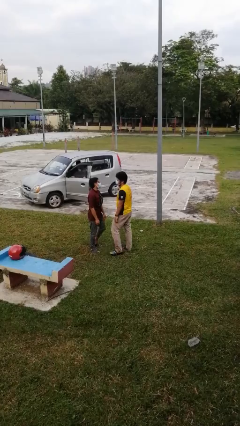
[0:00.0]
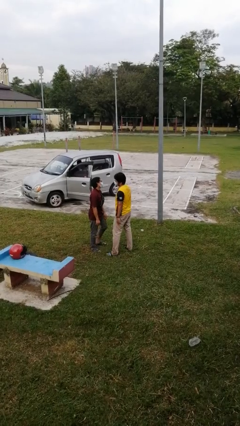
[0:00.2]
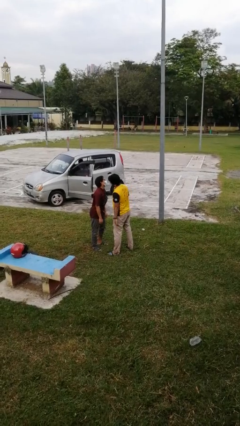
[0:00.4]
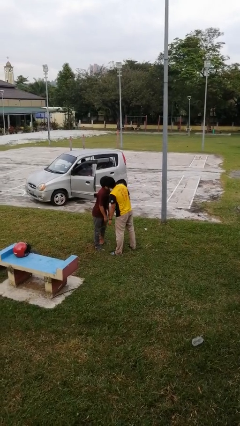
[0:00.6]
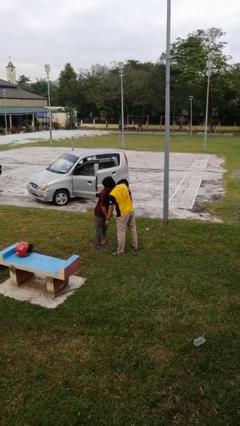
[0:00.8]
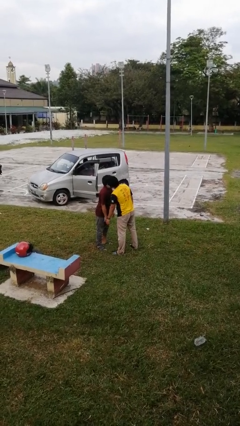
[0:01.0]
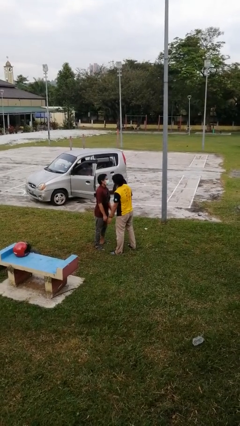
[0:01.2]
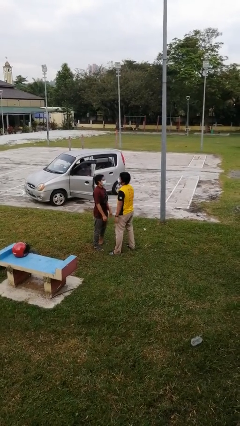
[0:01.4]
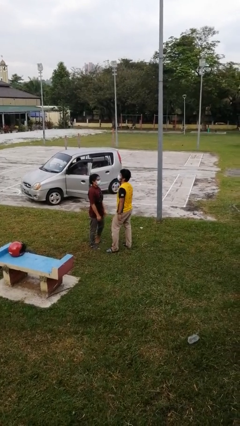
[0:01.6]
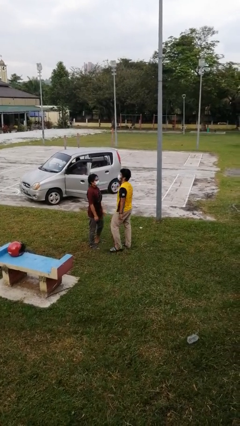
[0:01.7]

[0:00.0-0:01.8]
person kisses cheek of person

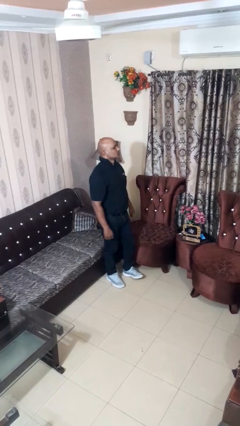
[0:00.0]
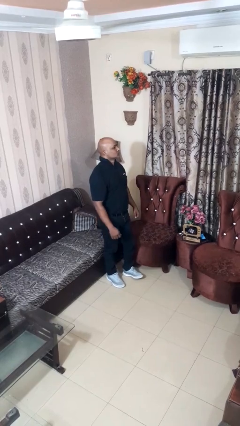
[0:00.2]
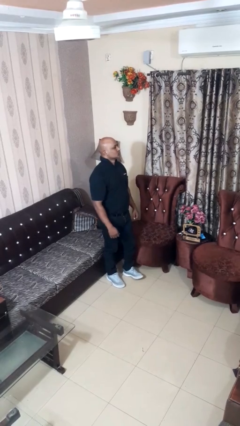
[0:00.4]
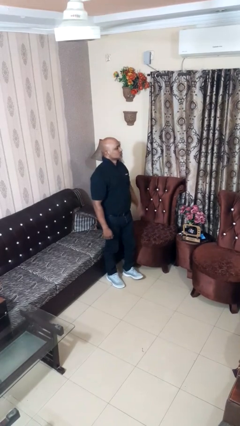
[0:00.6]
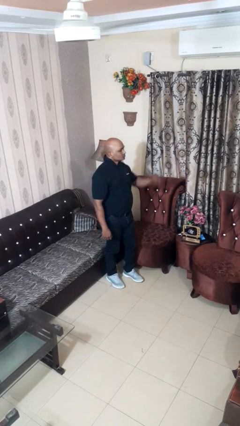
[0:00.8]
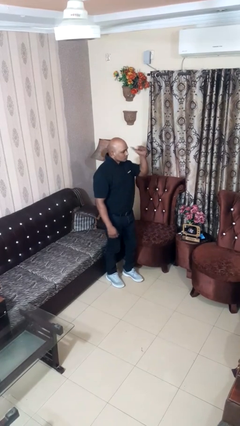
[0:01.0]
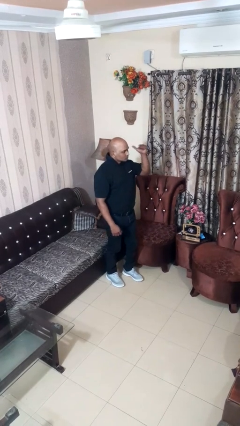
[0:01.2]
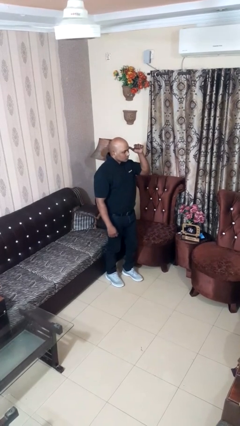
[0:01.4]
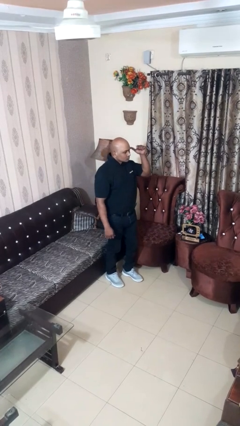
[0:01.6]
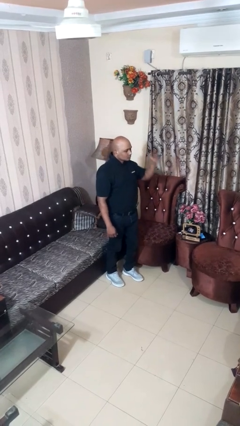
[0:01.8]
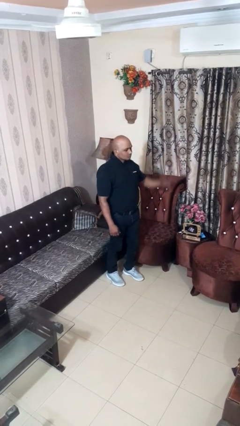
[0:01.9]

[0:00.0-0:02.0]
person gestures behind me

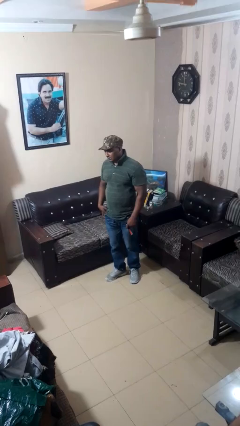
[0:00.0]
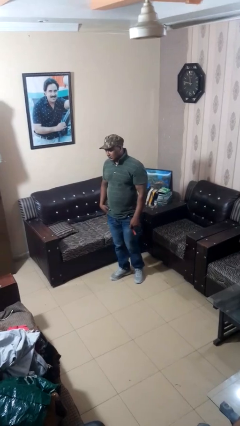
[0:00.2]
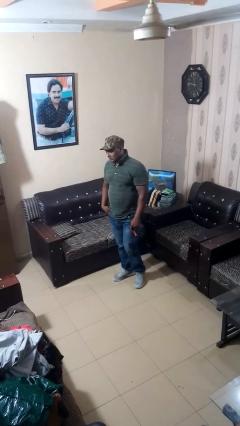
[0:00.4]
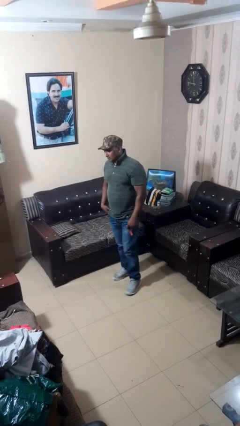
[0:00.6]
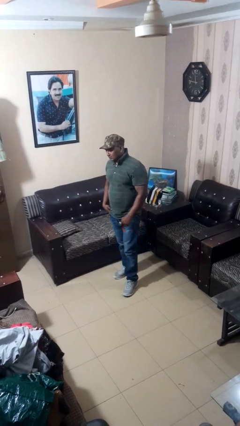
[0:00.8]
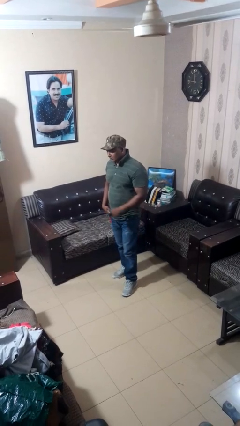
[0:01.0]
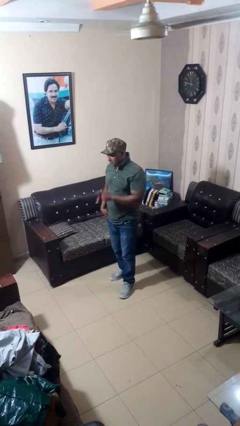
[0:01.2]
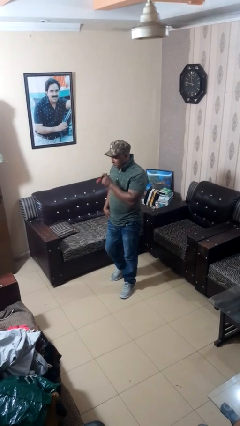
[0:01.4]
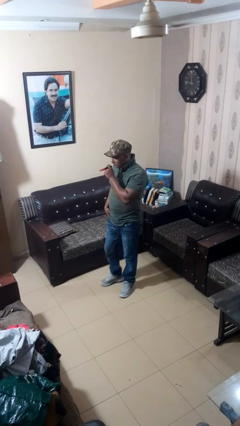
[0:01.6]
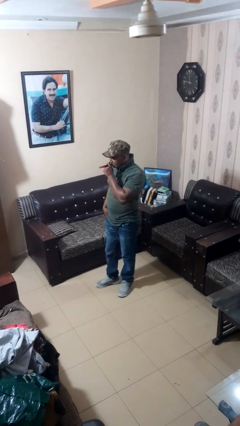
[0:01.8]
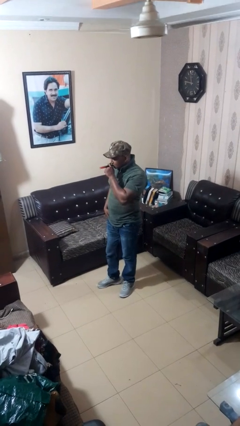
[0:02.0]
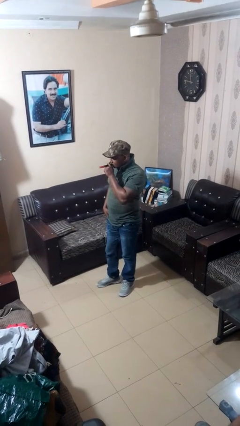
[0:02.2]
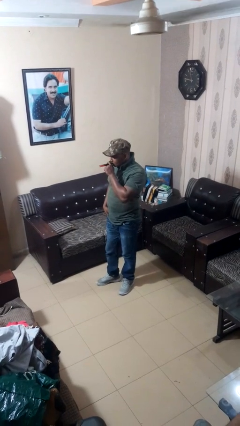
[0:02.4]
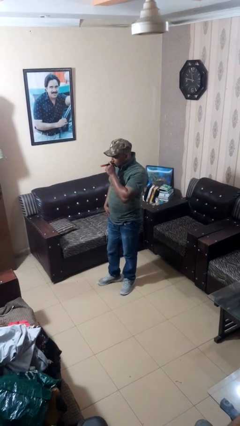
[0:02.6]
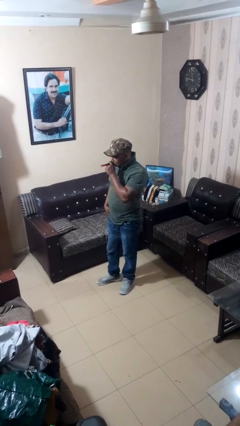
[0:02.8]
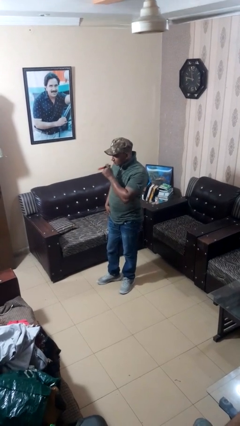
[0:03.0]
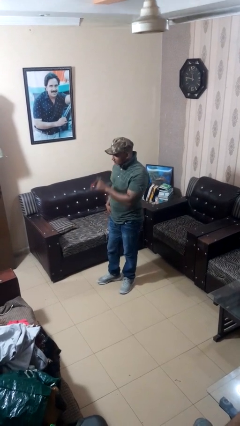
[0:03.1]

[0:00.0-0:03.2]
person vapes

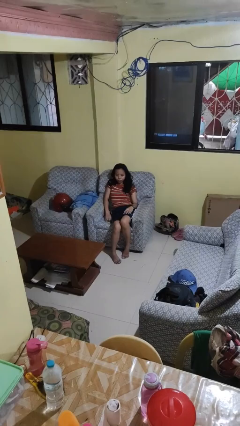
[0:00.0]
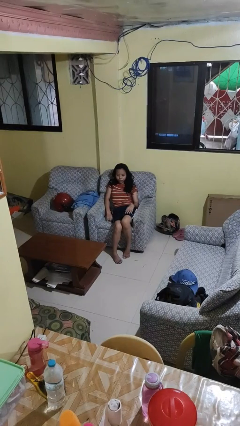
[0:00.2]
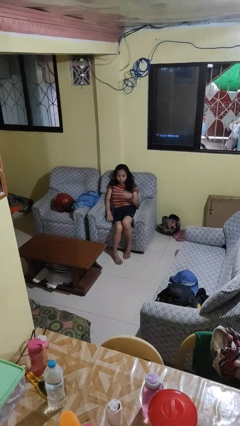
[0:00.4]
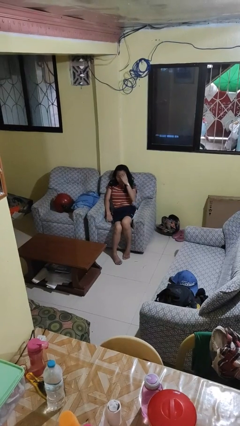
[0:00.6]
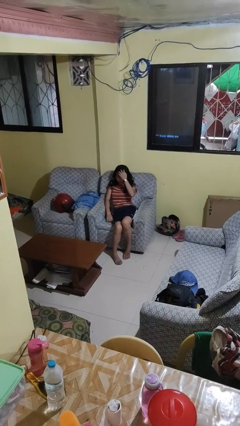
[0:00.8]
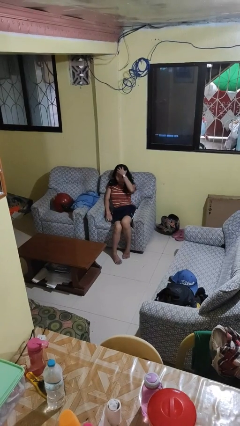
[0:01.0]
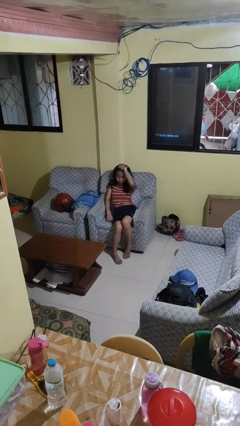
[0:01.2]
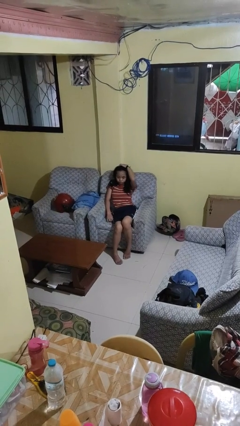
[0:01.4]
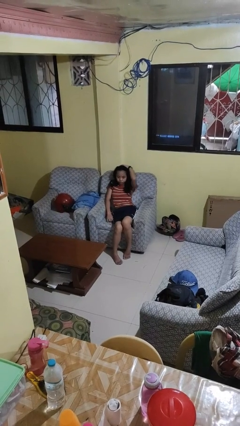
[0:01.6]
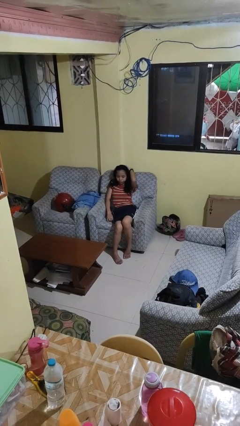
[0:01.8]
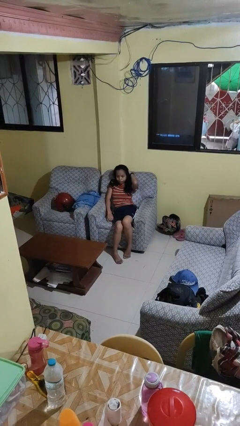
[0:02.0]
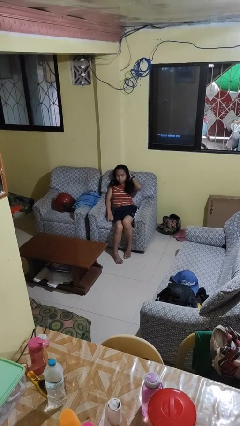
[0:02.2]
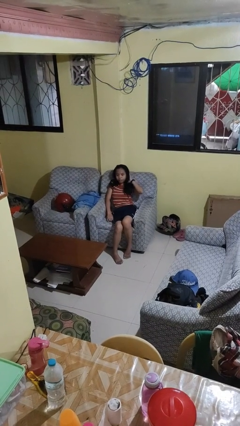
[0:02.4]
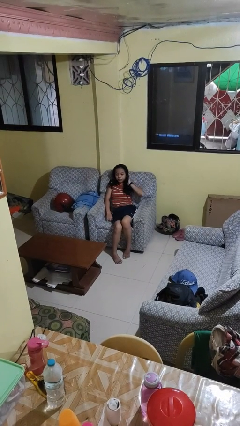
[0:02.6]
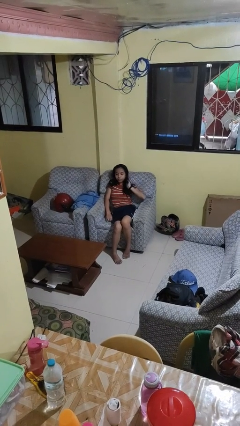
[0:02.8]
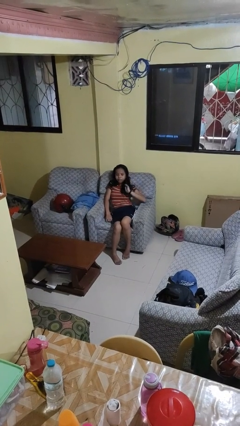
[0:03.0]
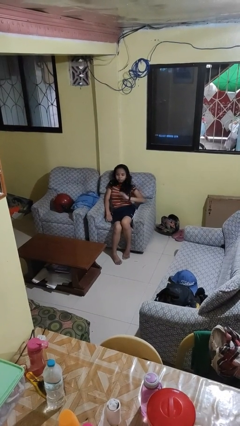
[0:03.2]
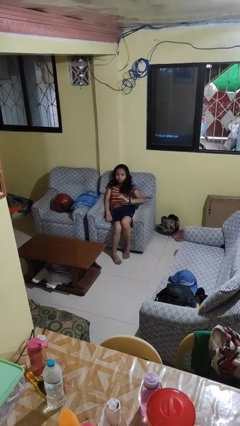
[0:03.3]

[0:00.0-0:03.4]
person strokes hair

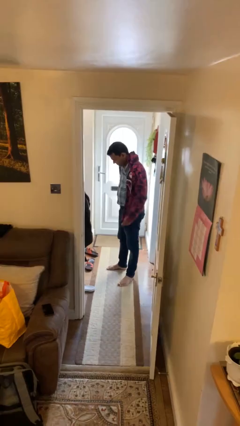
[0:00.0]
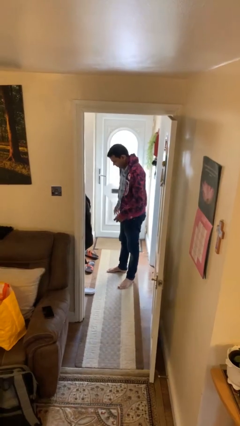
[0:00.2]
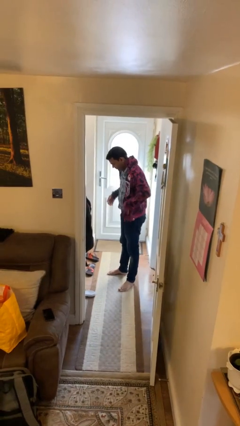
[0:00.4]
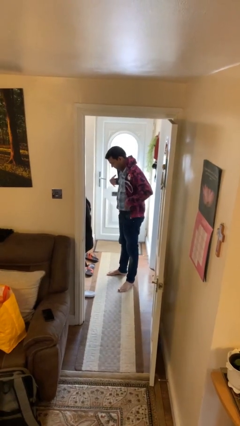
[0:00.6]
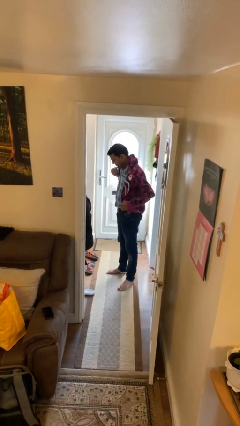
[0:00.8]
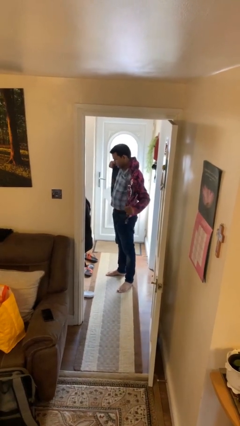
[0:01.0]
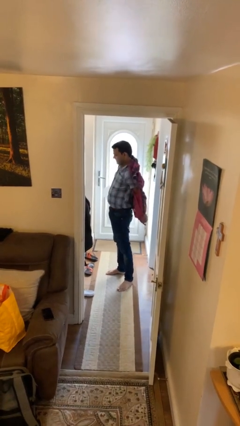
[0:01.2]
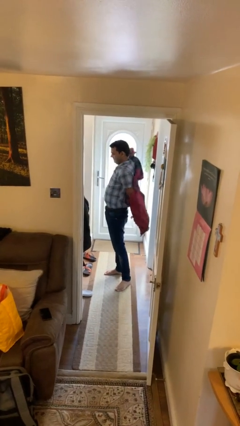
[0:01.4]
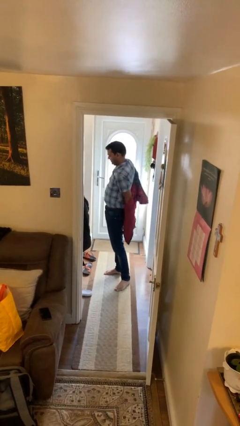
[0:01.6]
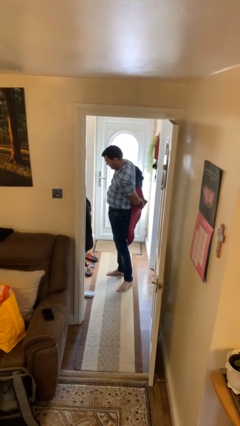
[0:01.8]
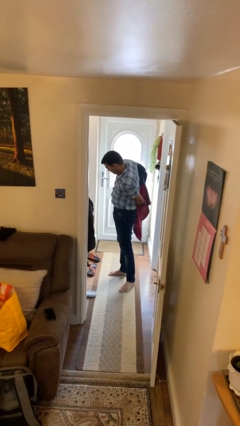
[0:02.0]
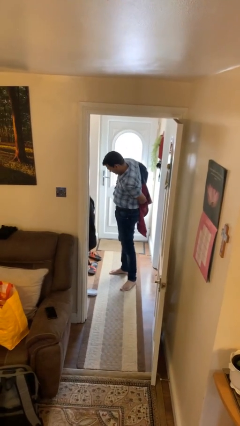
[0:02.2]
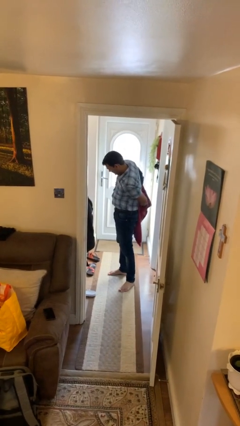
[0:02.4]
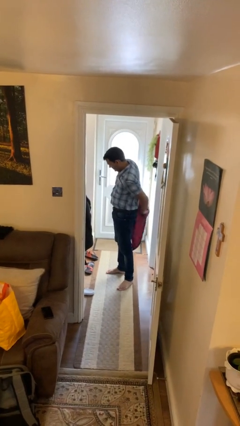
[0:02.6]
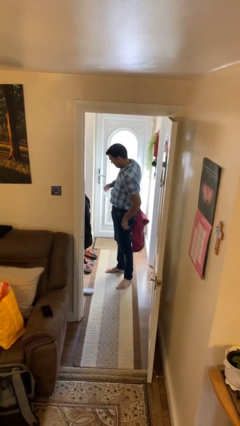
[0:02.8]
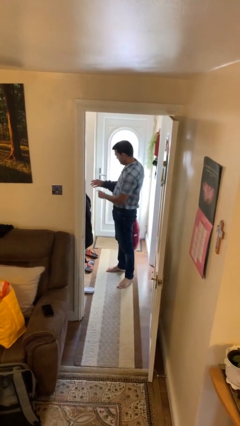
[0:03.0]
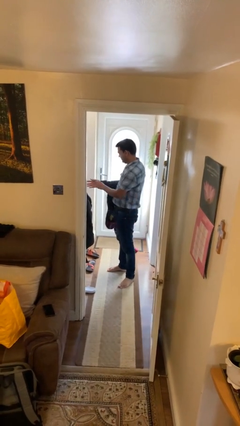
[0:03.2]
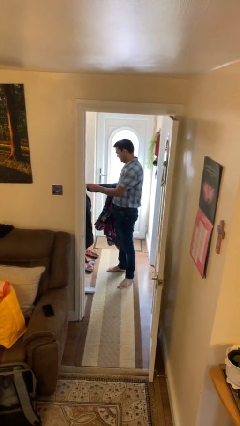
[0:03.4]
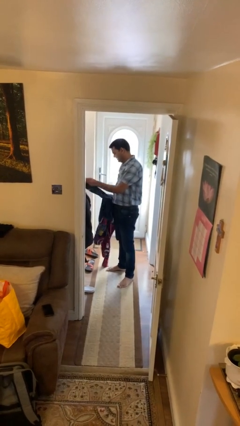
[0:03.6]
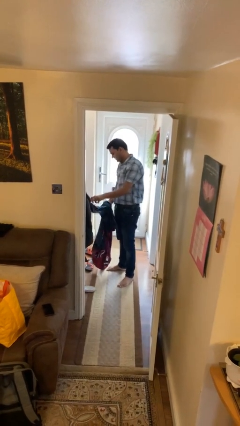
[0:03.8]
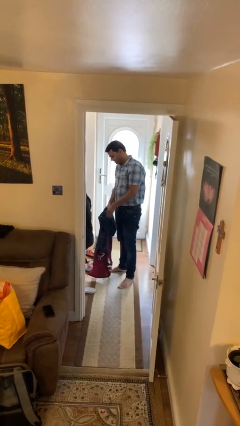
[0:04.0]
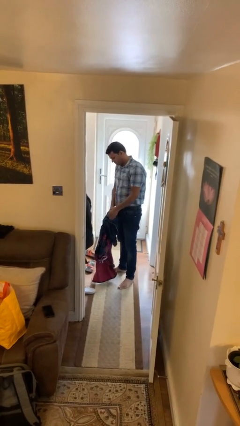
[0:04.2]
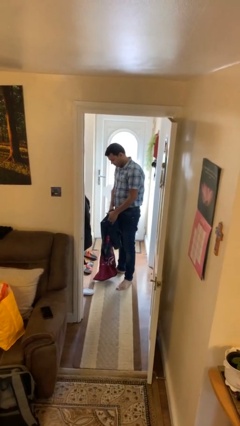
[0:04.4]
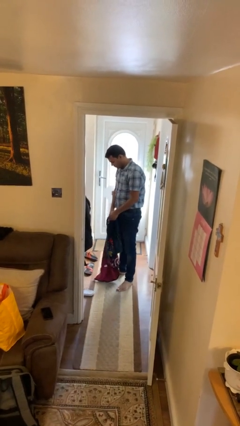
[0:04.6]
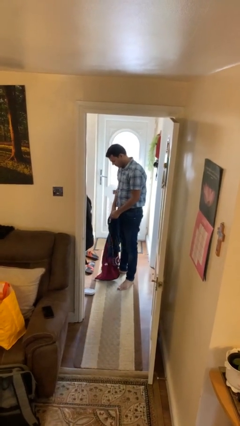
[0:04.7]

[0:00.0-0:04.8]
person takes off hoodie

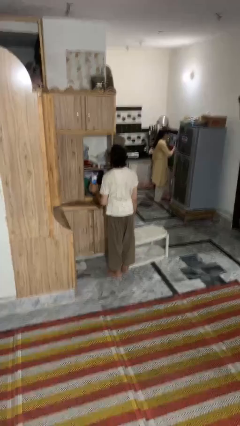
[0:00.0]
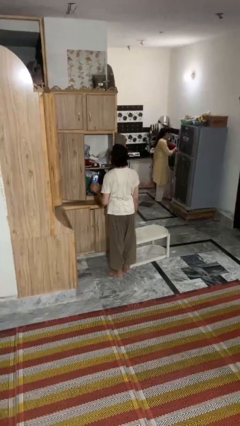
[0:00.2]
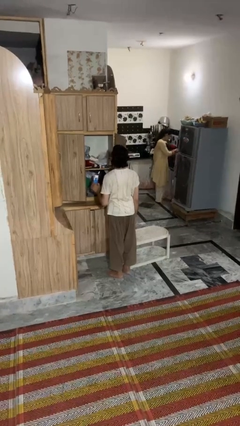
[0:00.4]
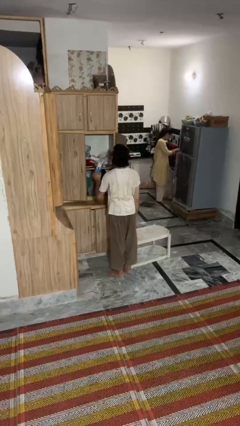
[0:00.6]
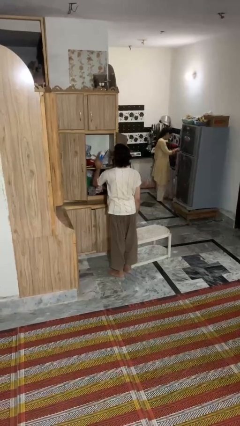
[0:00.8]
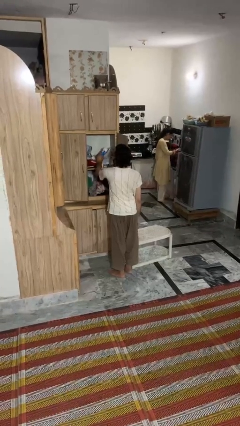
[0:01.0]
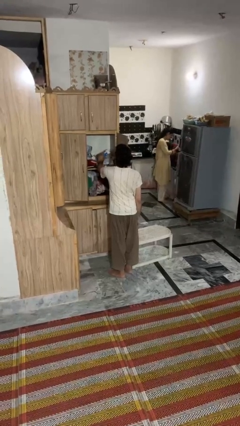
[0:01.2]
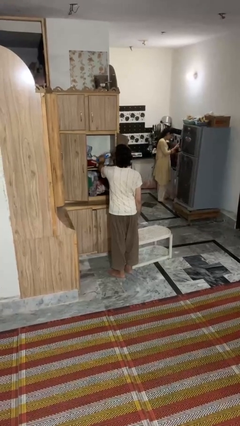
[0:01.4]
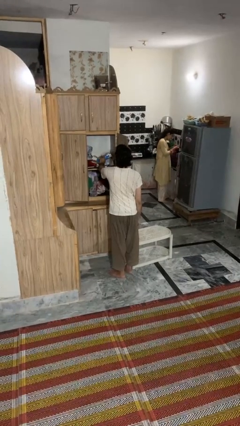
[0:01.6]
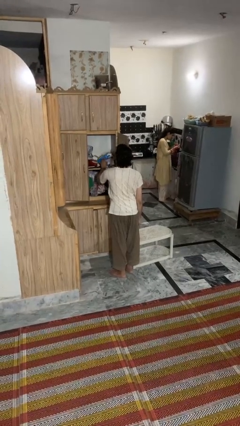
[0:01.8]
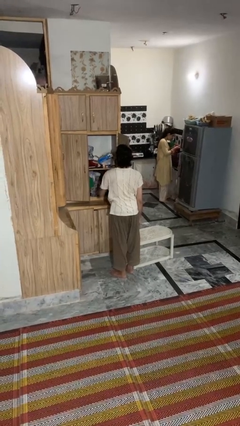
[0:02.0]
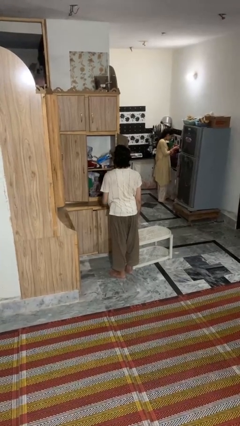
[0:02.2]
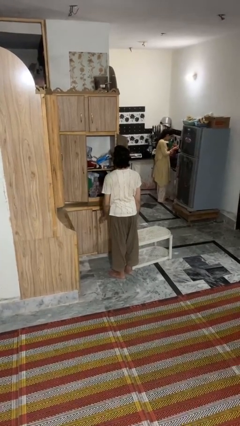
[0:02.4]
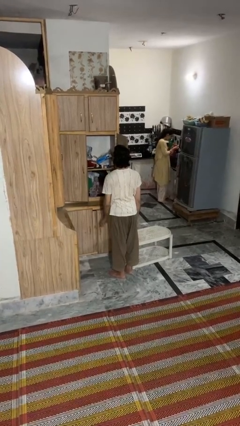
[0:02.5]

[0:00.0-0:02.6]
person puts down object into cabinet
